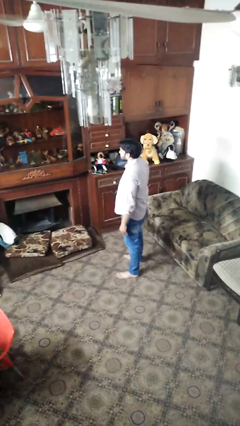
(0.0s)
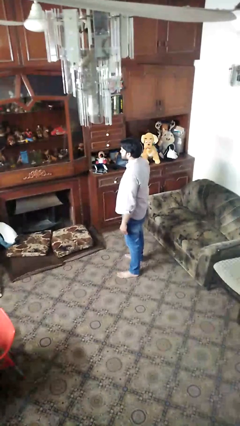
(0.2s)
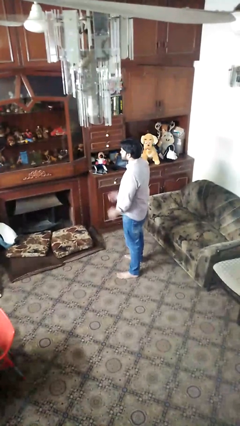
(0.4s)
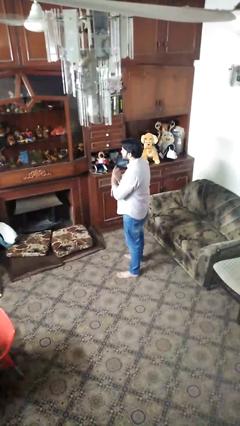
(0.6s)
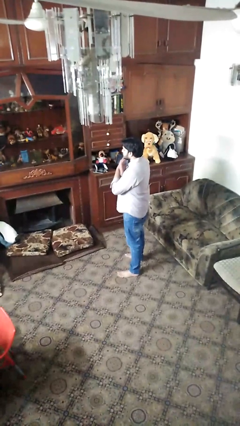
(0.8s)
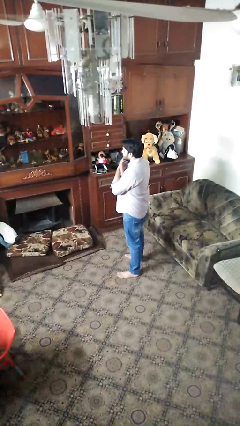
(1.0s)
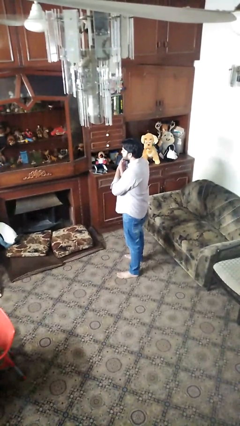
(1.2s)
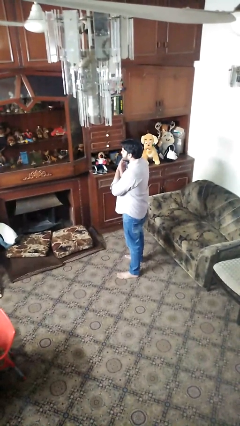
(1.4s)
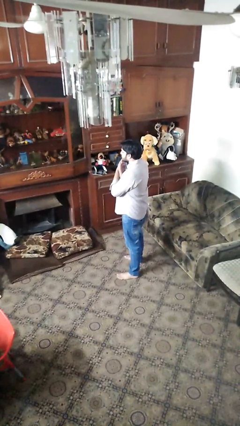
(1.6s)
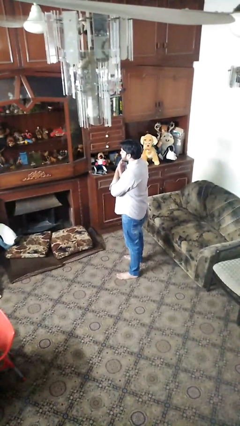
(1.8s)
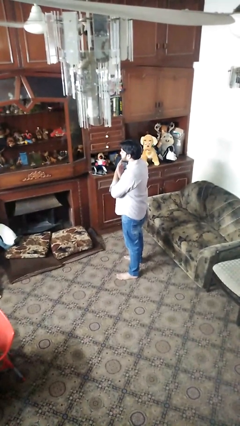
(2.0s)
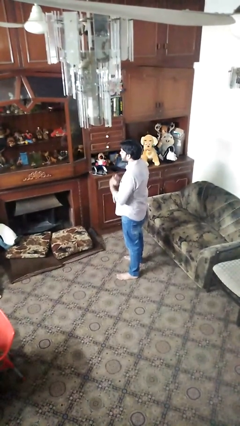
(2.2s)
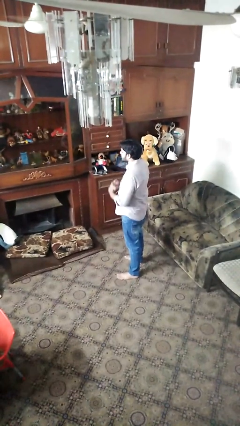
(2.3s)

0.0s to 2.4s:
person gestures arms x

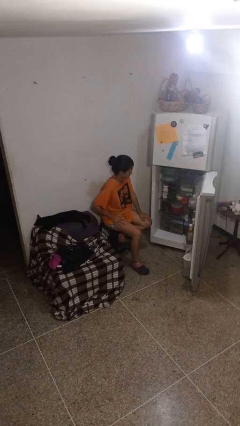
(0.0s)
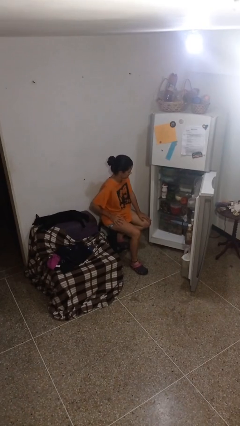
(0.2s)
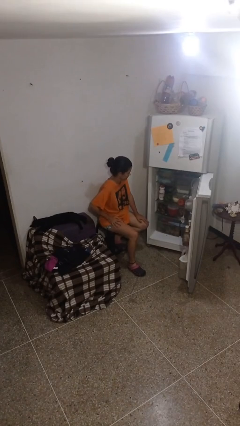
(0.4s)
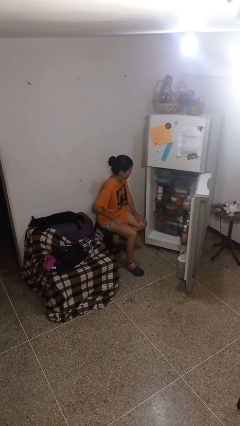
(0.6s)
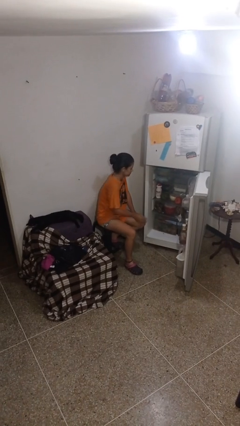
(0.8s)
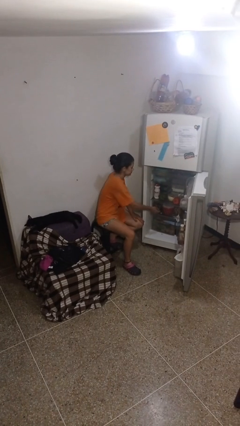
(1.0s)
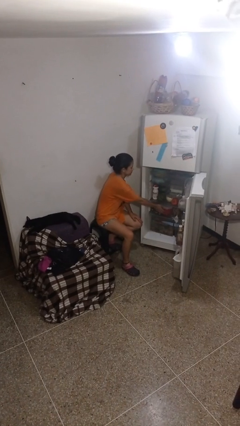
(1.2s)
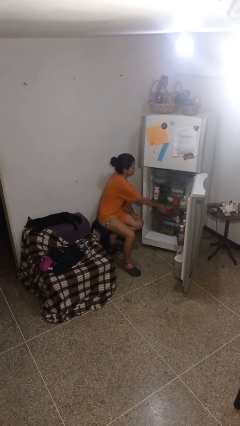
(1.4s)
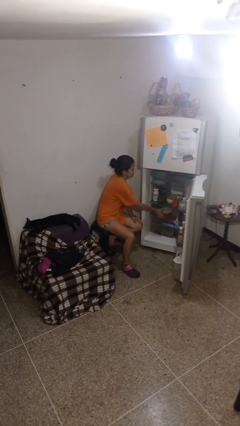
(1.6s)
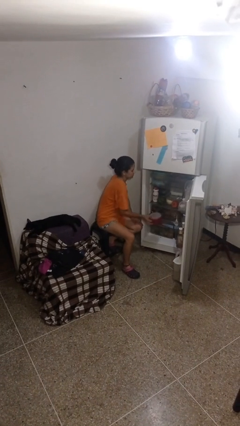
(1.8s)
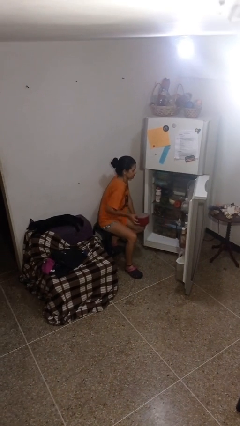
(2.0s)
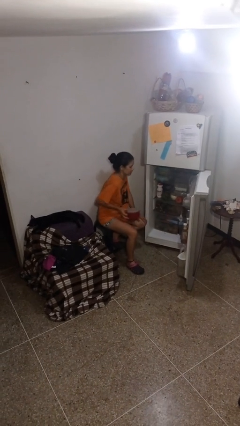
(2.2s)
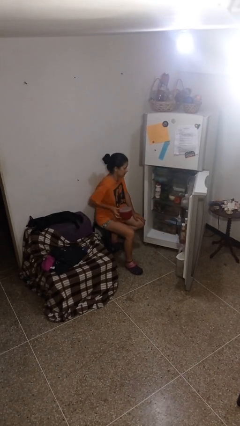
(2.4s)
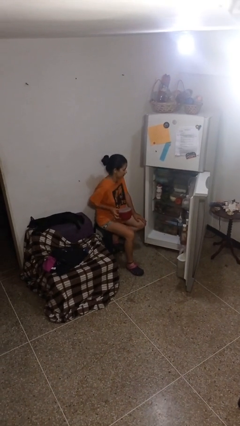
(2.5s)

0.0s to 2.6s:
person takes object from refrigerator

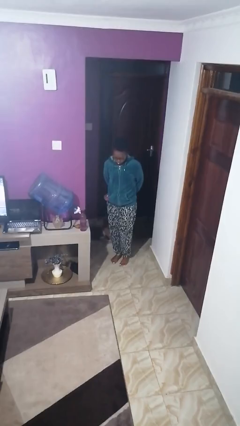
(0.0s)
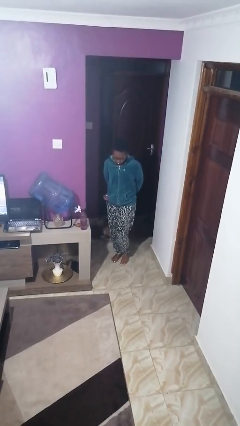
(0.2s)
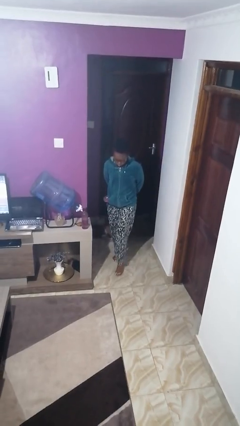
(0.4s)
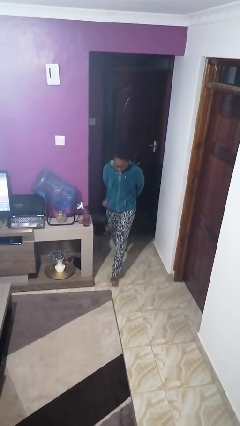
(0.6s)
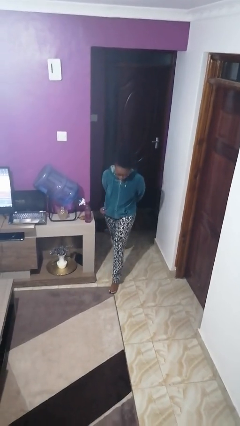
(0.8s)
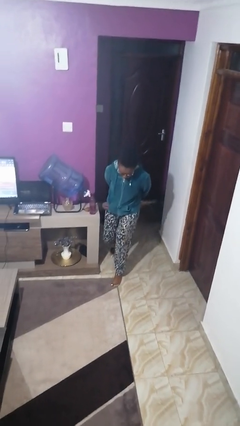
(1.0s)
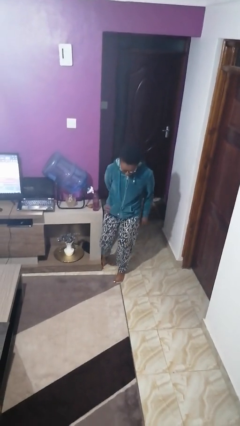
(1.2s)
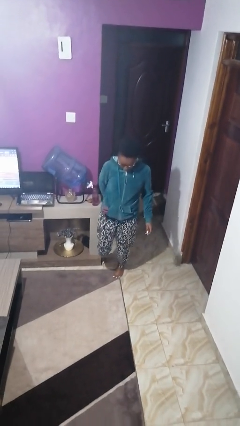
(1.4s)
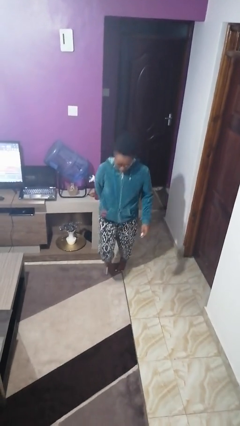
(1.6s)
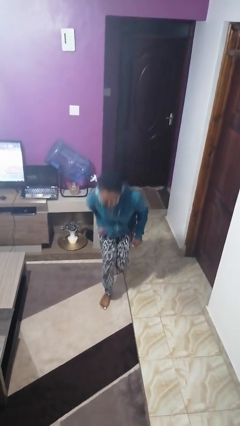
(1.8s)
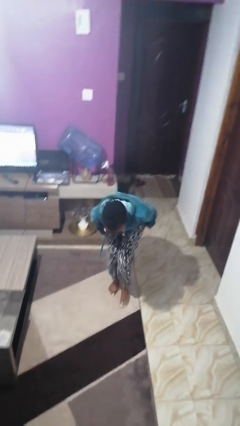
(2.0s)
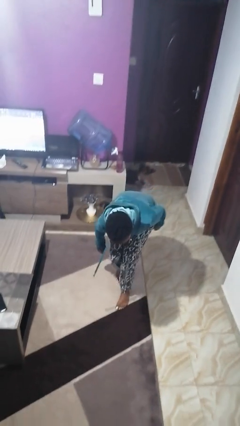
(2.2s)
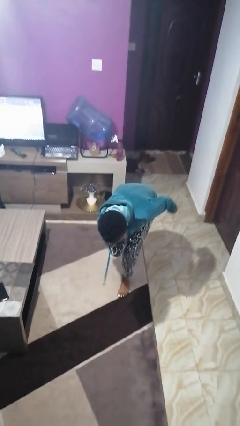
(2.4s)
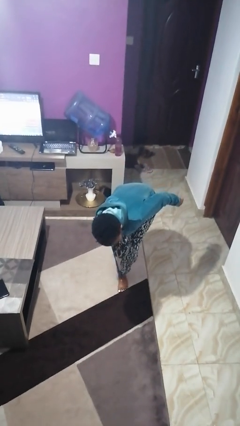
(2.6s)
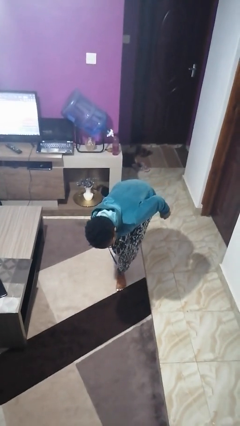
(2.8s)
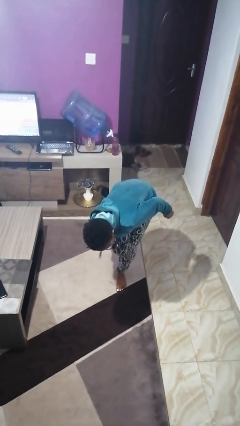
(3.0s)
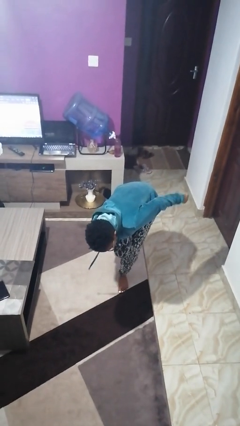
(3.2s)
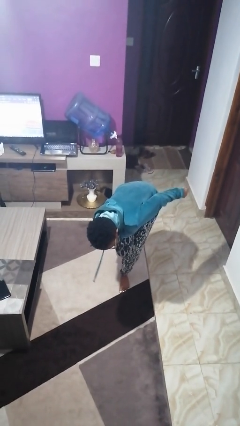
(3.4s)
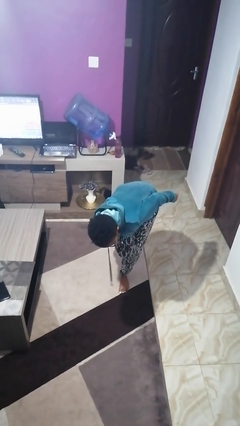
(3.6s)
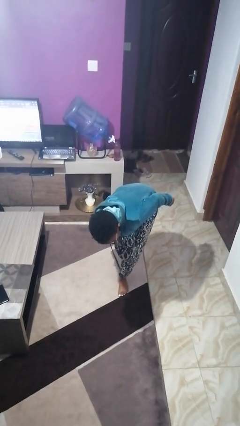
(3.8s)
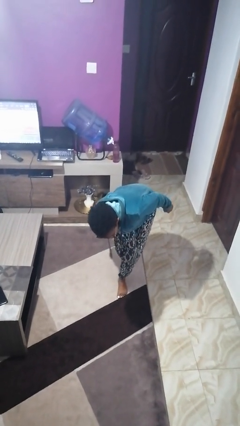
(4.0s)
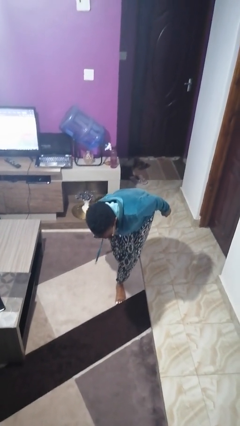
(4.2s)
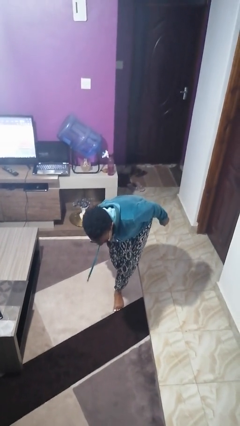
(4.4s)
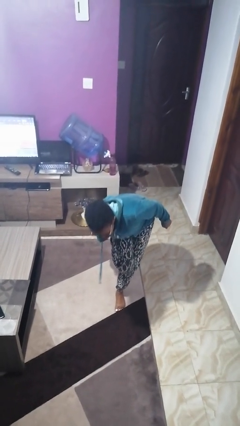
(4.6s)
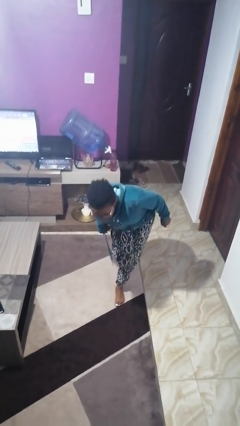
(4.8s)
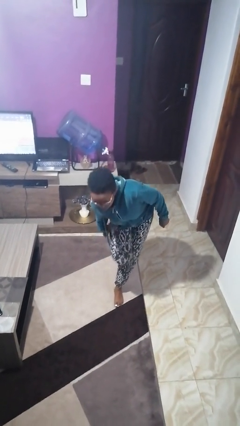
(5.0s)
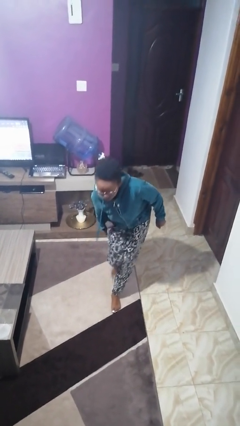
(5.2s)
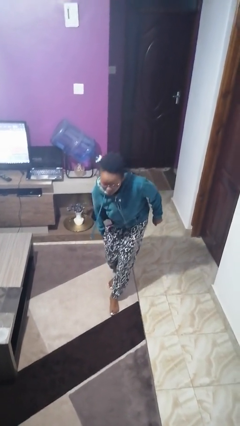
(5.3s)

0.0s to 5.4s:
person stubs toe

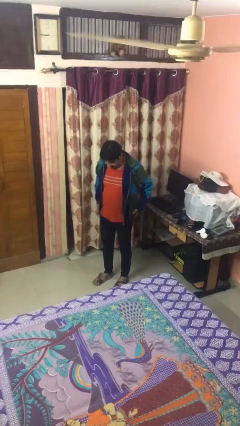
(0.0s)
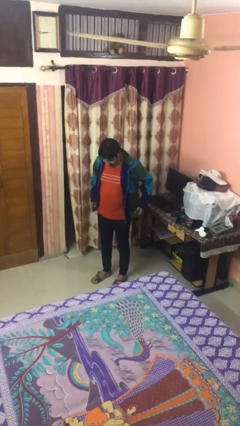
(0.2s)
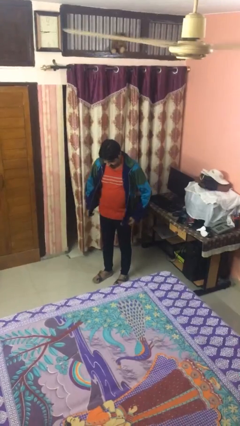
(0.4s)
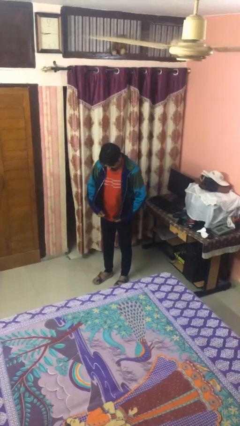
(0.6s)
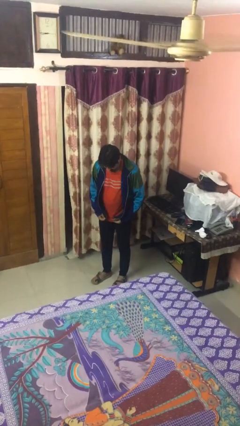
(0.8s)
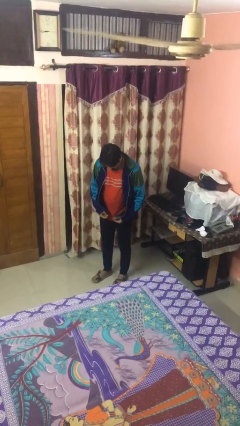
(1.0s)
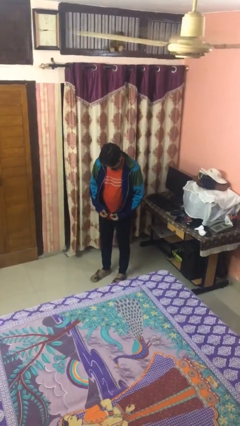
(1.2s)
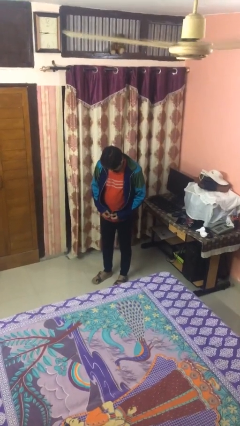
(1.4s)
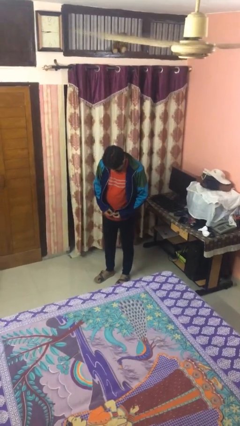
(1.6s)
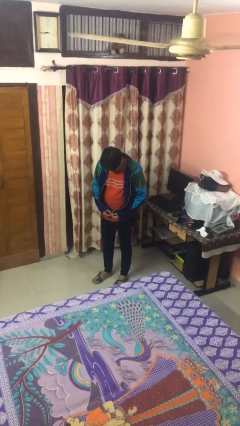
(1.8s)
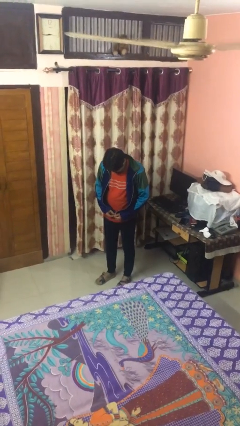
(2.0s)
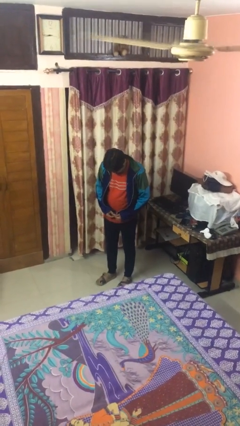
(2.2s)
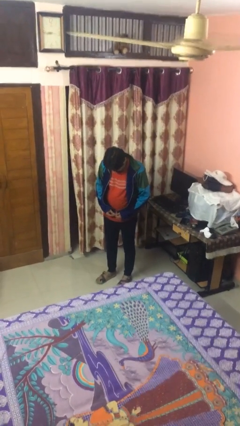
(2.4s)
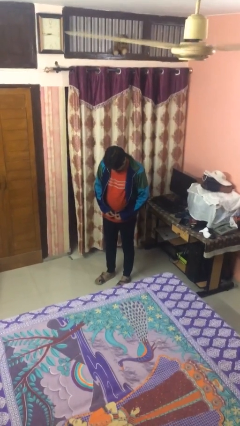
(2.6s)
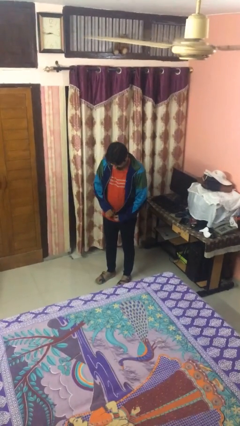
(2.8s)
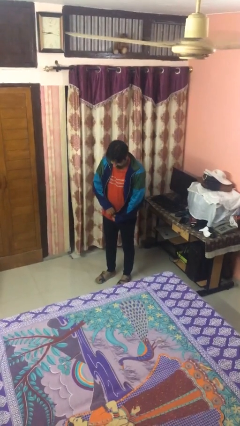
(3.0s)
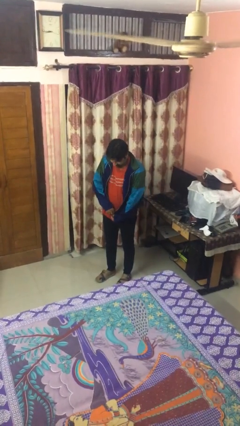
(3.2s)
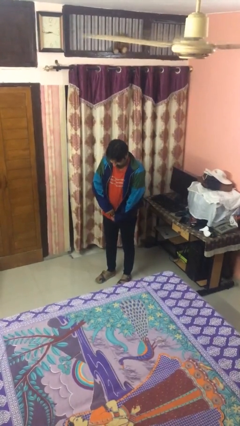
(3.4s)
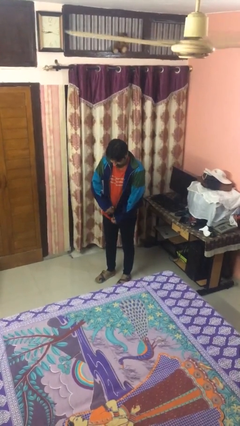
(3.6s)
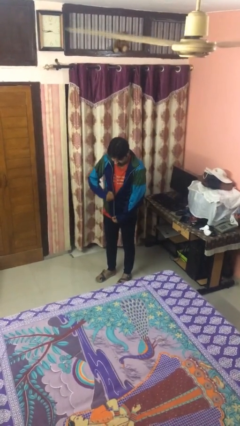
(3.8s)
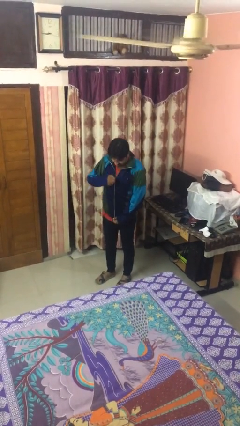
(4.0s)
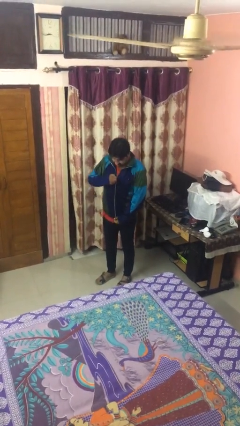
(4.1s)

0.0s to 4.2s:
person zips up jacket

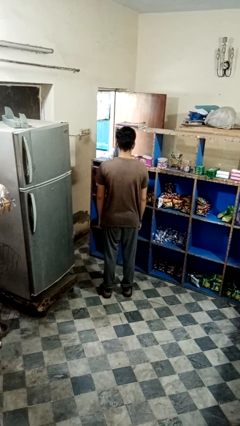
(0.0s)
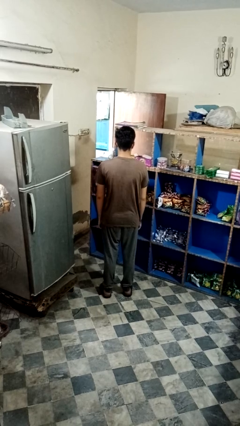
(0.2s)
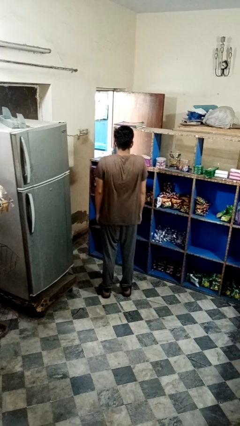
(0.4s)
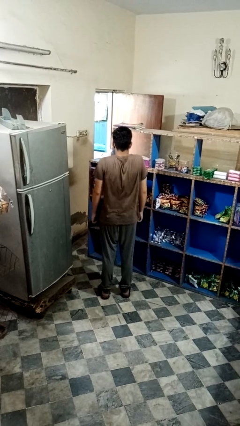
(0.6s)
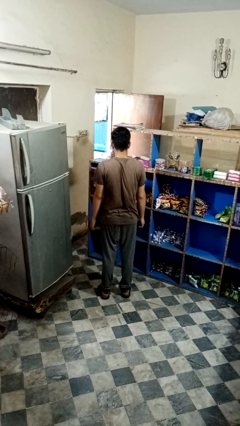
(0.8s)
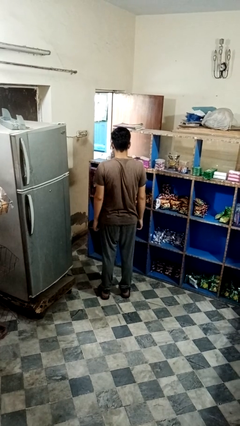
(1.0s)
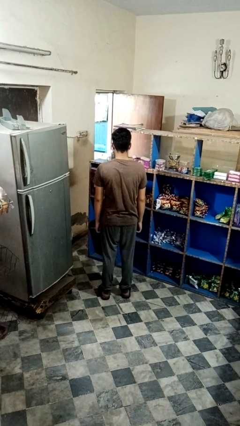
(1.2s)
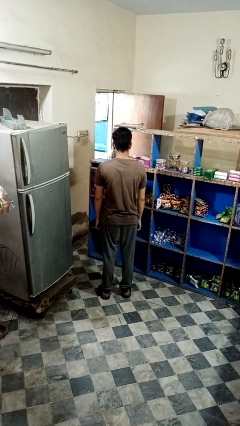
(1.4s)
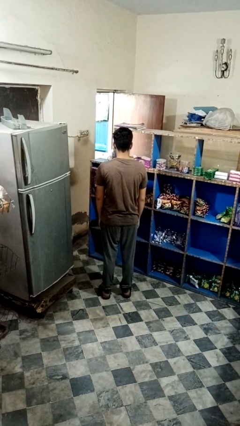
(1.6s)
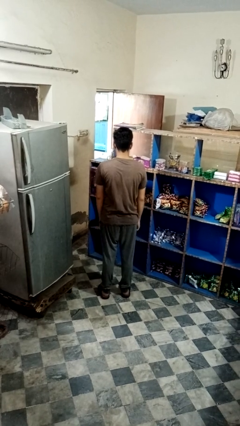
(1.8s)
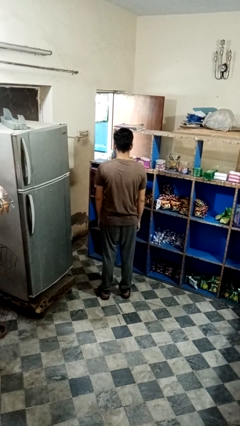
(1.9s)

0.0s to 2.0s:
person shrugs

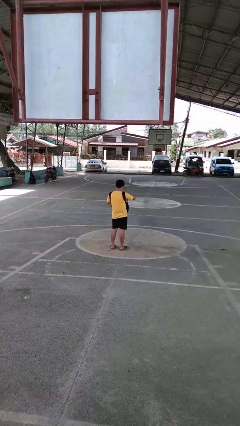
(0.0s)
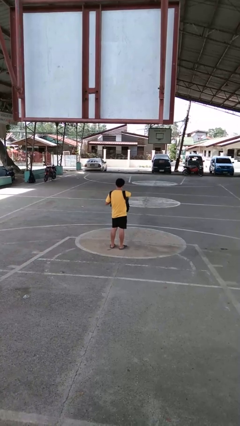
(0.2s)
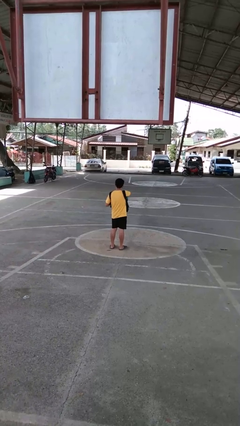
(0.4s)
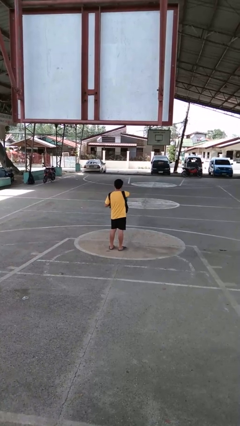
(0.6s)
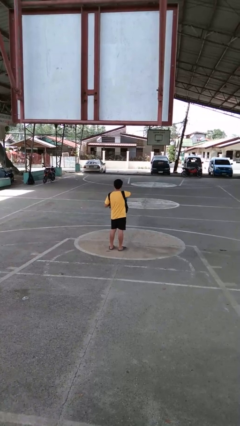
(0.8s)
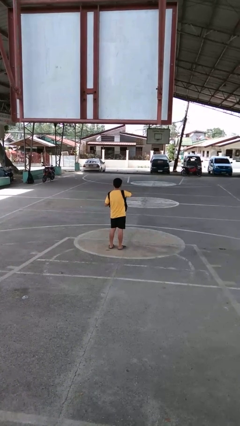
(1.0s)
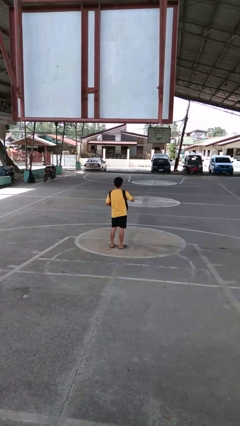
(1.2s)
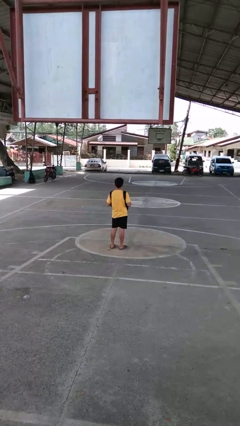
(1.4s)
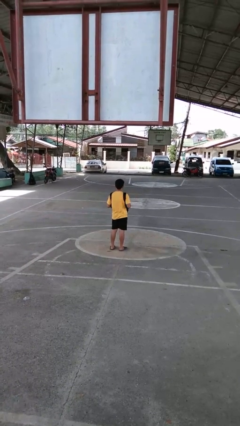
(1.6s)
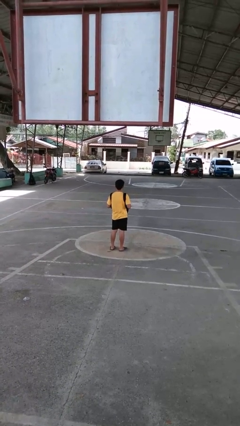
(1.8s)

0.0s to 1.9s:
person puts object into purse
